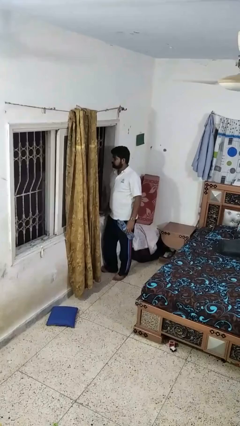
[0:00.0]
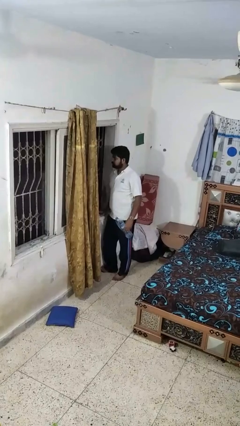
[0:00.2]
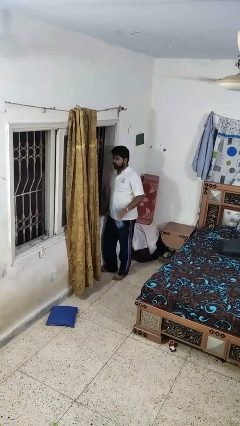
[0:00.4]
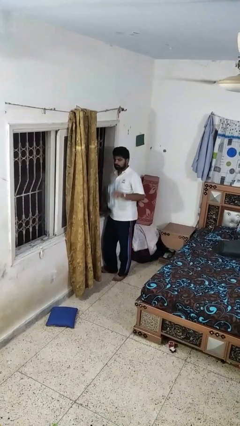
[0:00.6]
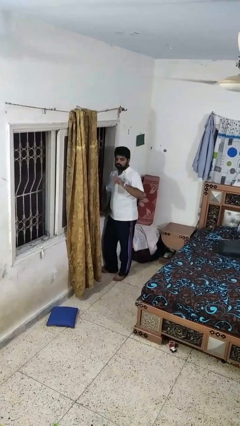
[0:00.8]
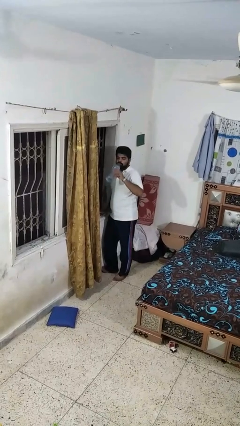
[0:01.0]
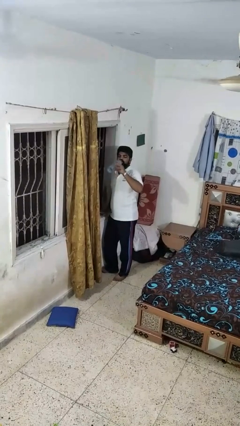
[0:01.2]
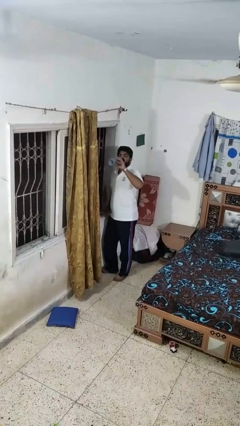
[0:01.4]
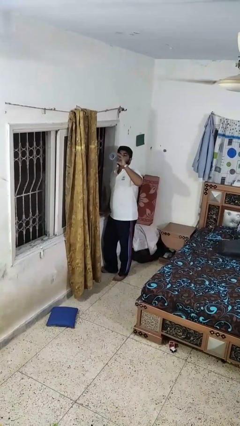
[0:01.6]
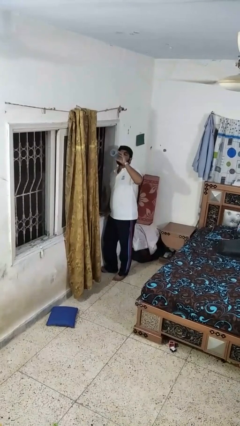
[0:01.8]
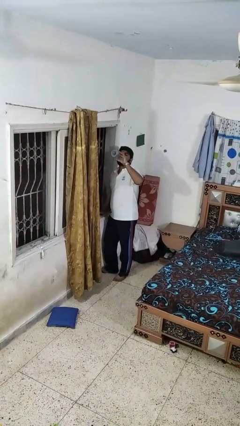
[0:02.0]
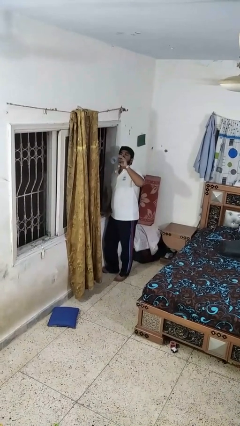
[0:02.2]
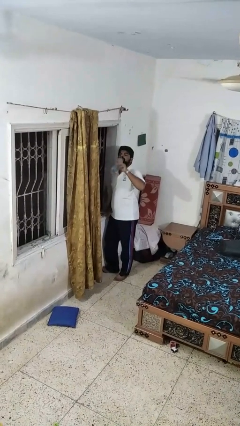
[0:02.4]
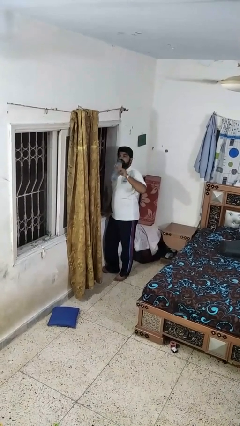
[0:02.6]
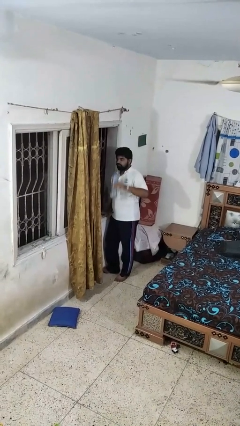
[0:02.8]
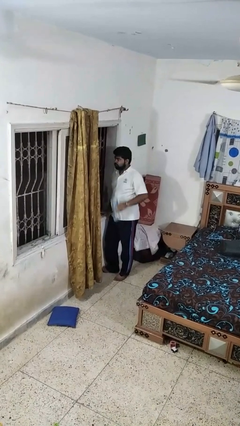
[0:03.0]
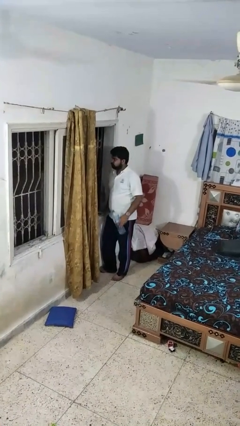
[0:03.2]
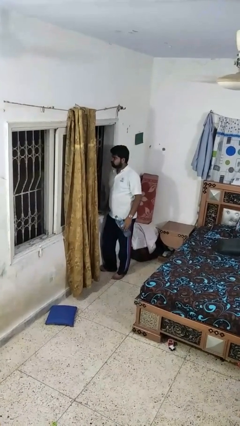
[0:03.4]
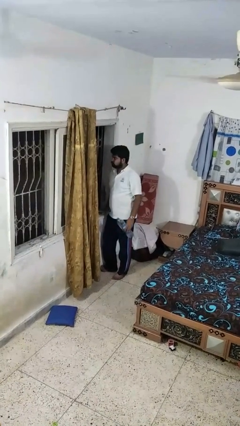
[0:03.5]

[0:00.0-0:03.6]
person drinks from bottle

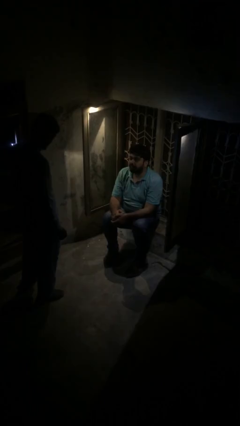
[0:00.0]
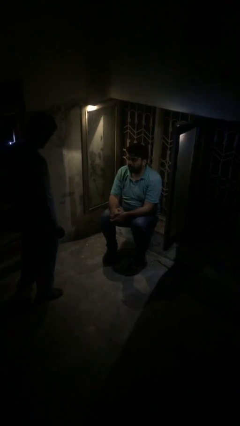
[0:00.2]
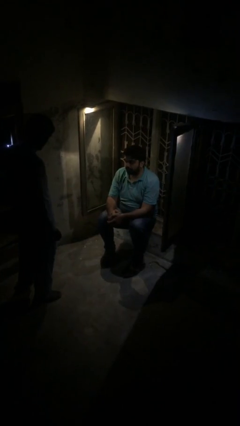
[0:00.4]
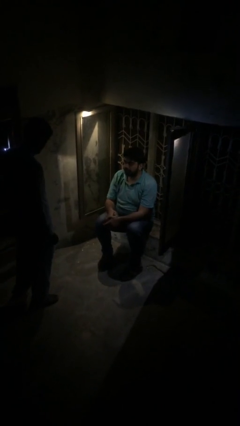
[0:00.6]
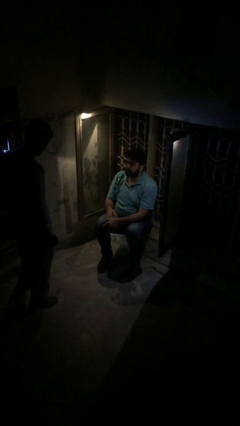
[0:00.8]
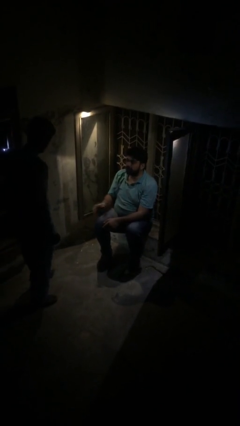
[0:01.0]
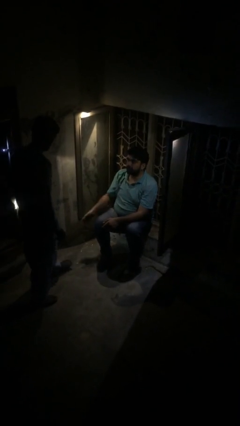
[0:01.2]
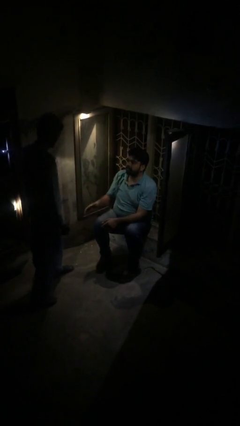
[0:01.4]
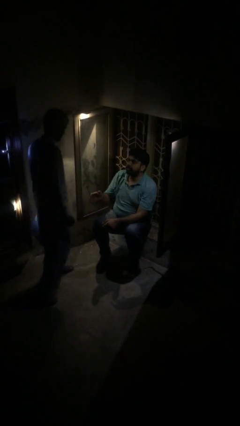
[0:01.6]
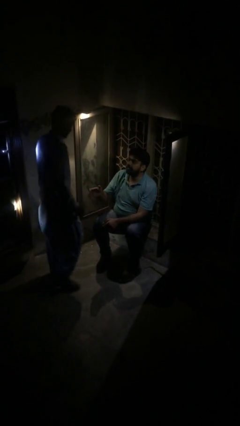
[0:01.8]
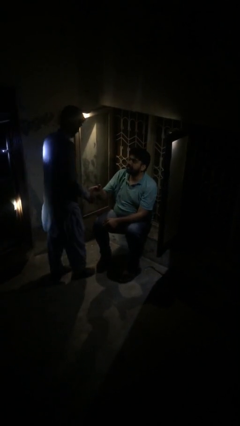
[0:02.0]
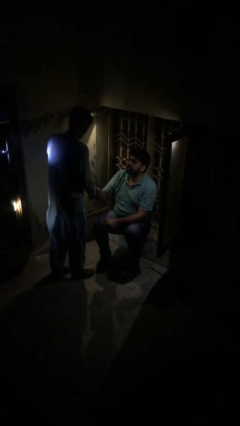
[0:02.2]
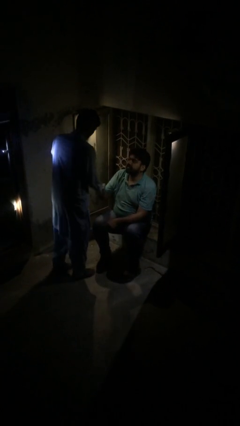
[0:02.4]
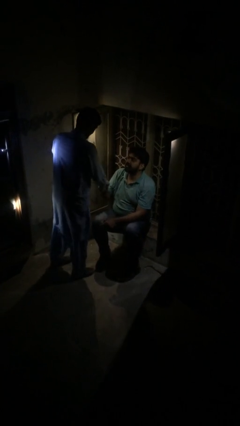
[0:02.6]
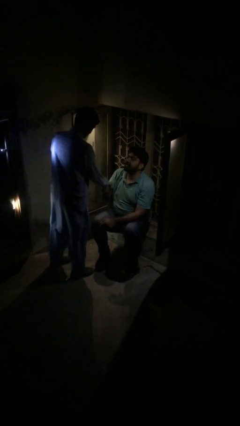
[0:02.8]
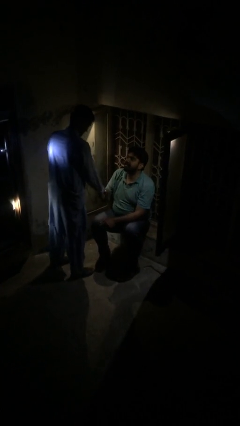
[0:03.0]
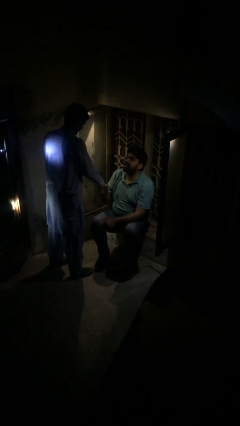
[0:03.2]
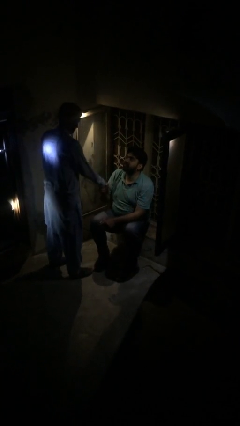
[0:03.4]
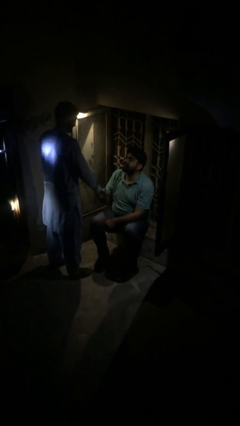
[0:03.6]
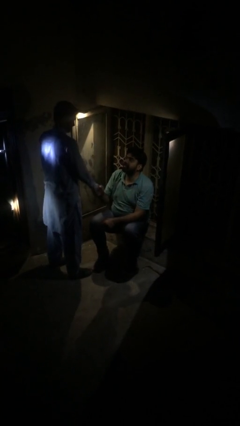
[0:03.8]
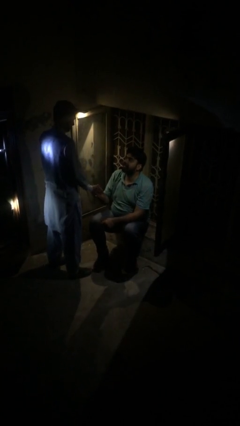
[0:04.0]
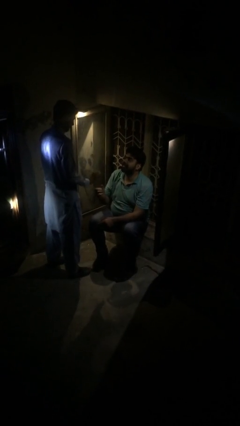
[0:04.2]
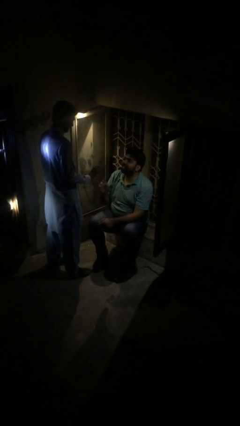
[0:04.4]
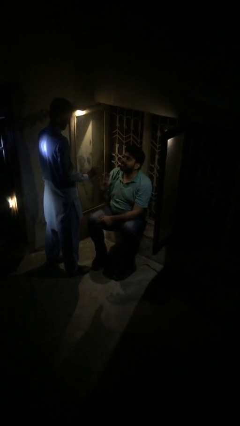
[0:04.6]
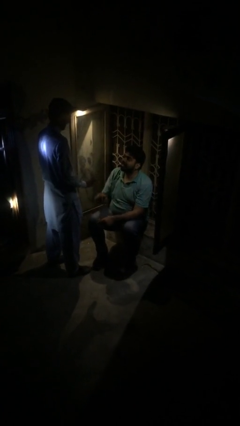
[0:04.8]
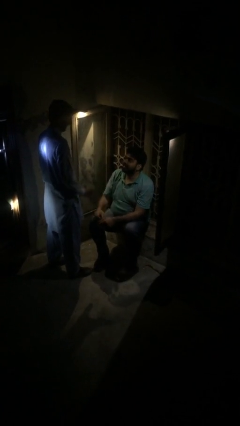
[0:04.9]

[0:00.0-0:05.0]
person shakes hand

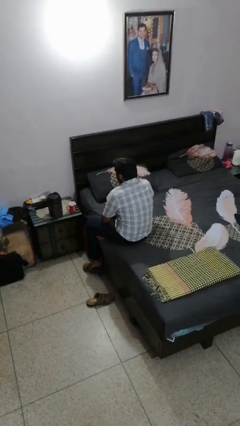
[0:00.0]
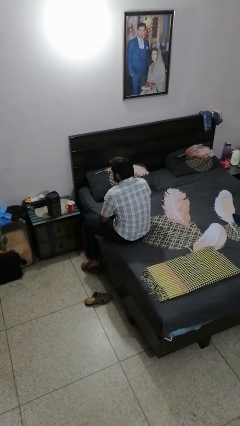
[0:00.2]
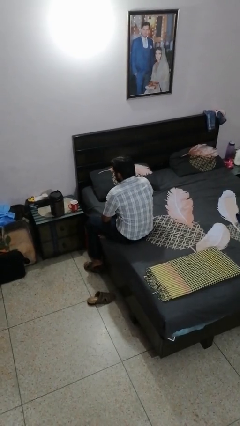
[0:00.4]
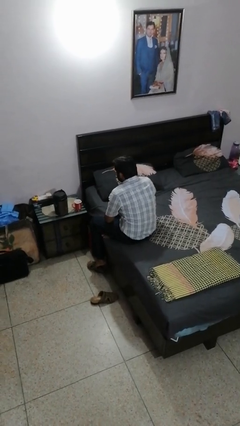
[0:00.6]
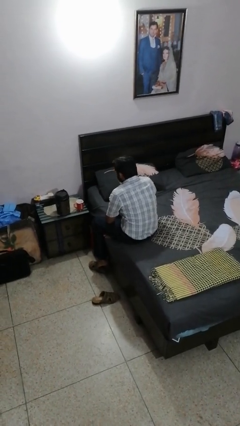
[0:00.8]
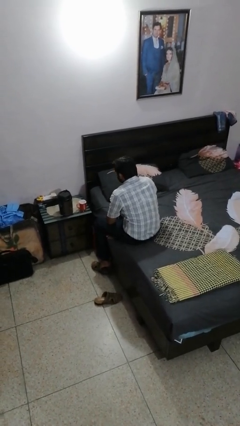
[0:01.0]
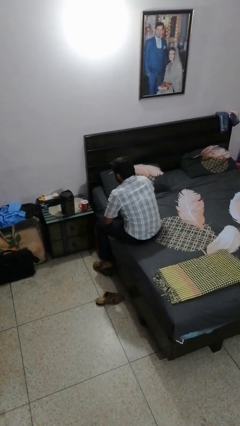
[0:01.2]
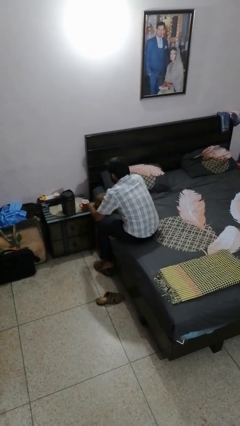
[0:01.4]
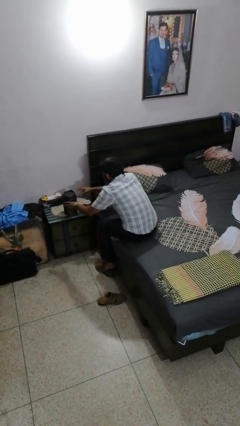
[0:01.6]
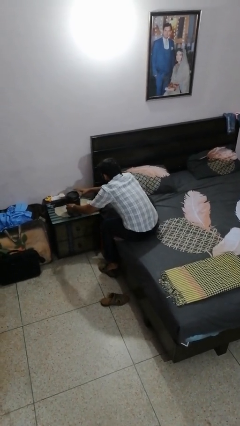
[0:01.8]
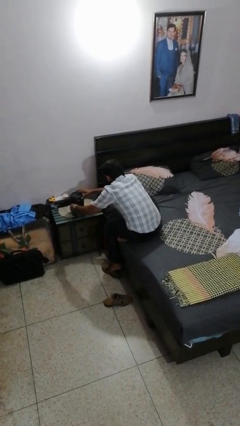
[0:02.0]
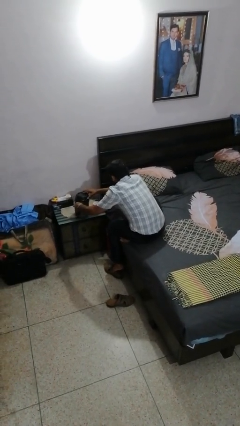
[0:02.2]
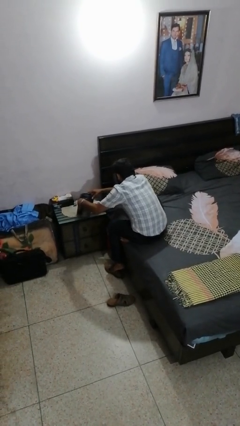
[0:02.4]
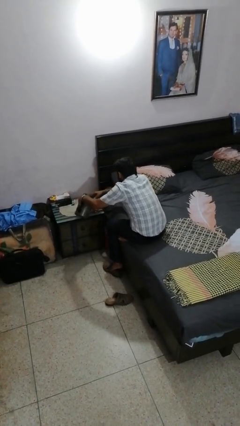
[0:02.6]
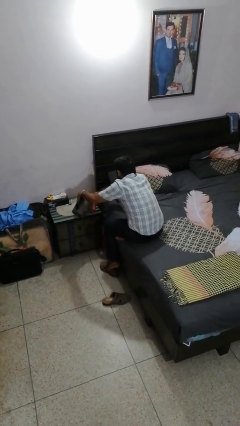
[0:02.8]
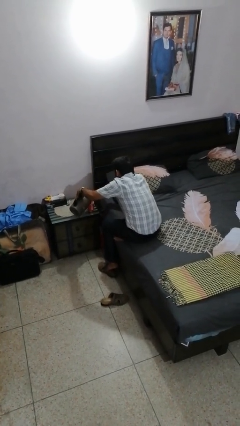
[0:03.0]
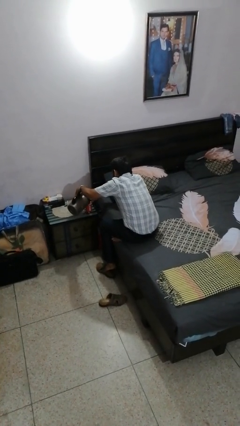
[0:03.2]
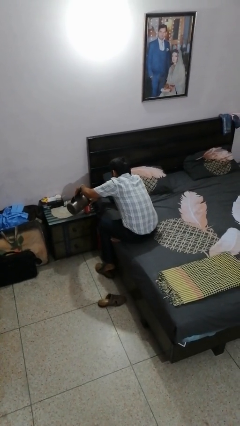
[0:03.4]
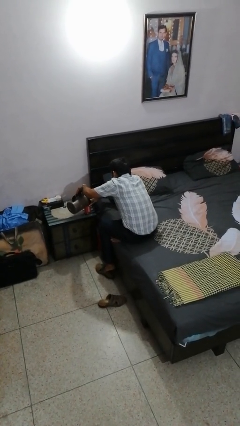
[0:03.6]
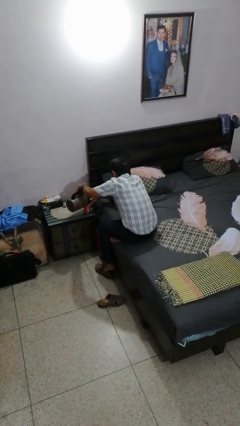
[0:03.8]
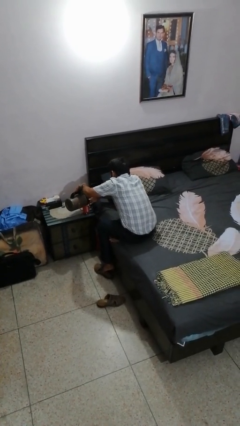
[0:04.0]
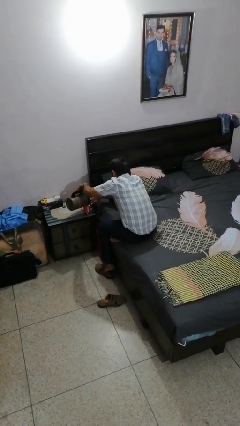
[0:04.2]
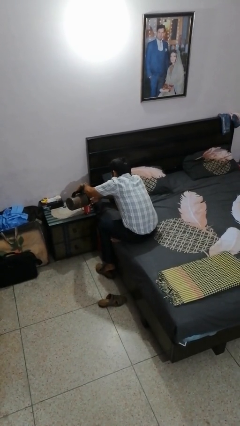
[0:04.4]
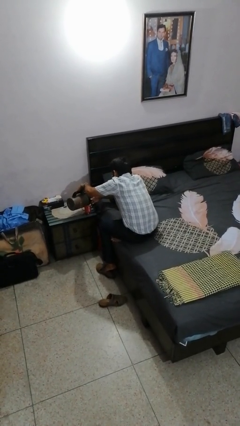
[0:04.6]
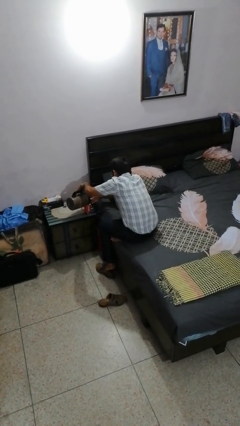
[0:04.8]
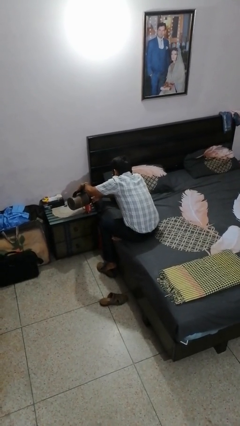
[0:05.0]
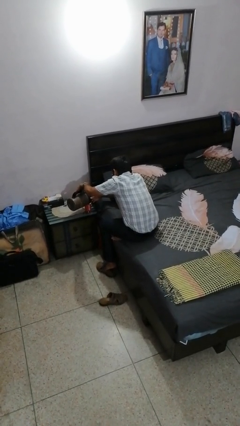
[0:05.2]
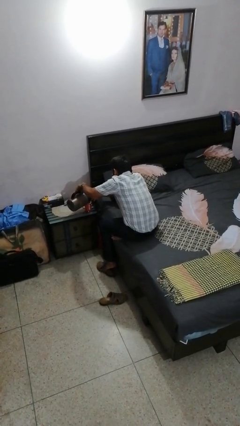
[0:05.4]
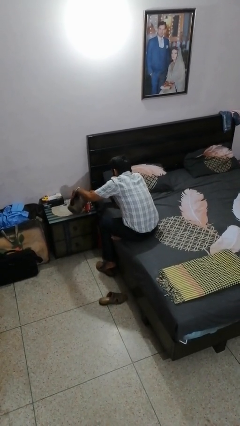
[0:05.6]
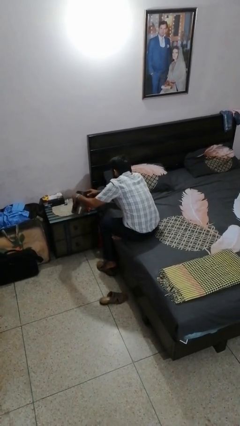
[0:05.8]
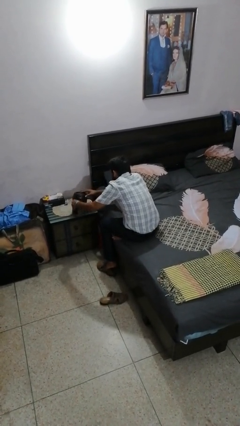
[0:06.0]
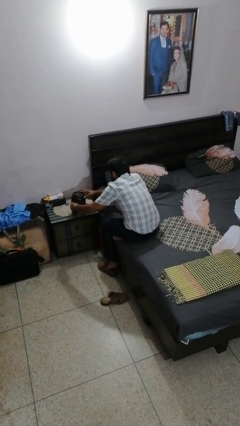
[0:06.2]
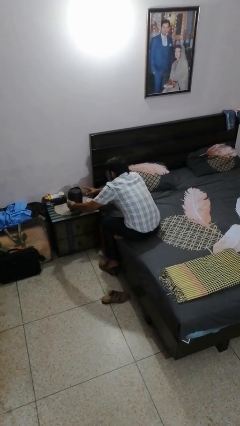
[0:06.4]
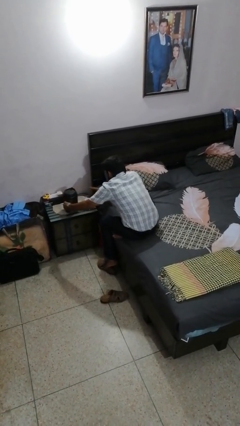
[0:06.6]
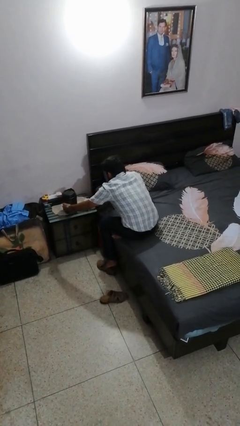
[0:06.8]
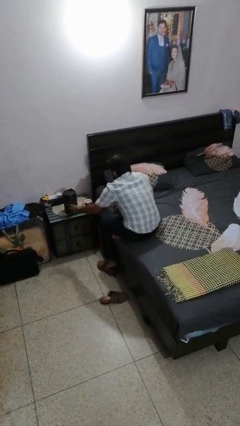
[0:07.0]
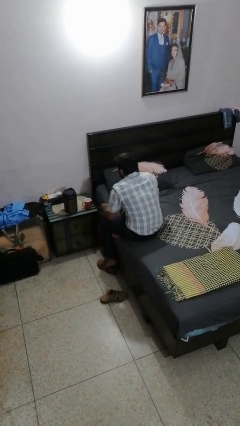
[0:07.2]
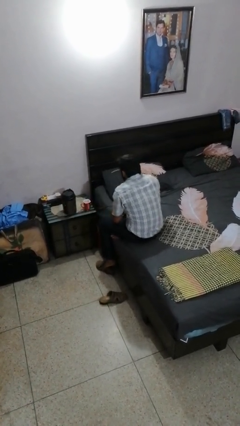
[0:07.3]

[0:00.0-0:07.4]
person pours coffee into mug

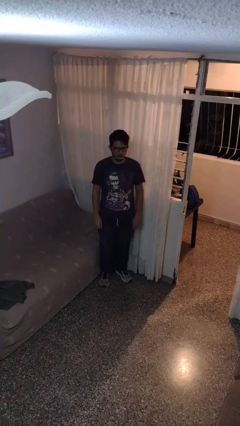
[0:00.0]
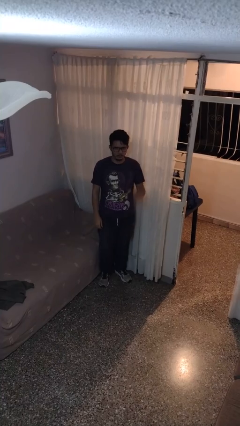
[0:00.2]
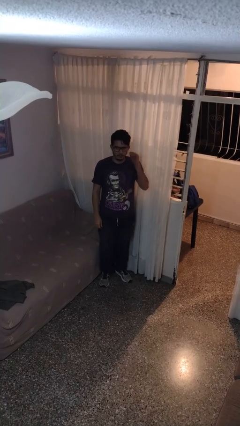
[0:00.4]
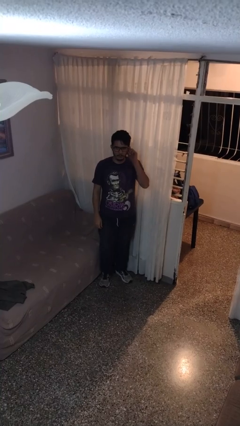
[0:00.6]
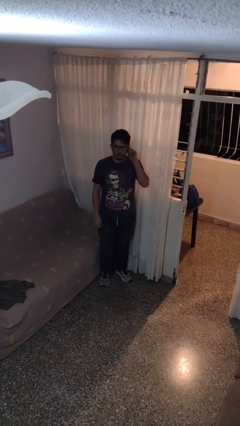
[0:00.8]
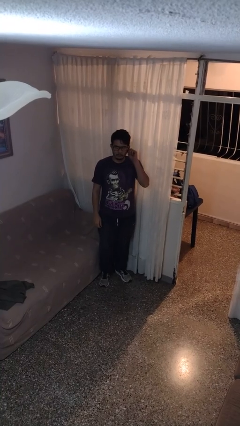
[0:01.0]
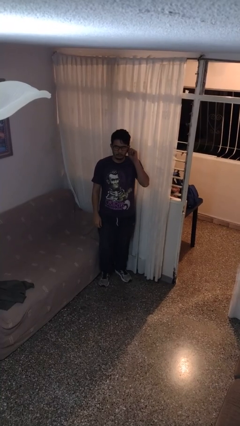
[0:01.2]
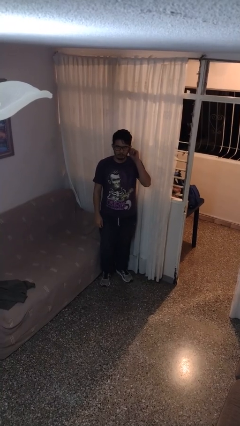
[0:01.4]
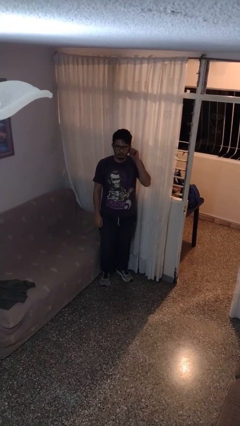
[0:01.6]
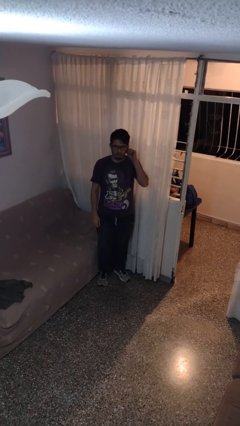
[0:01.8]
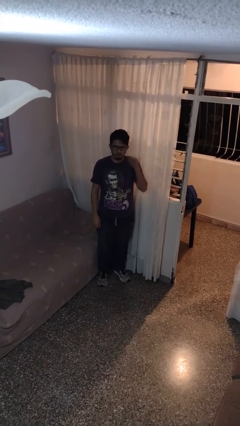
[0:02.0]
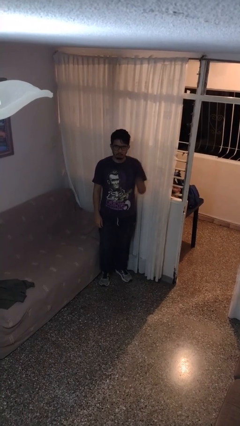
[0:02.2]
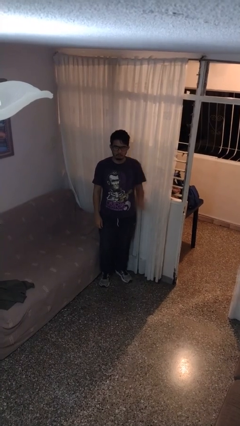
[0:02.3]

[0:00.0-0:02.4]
person touches earlobe
